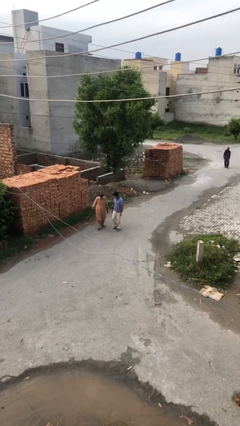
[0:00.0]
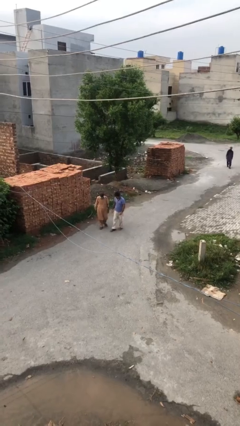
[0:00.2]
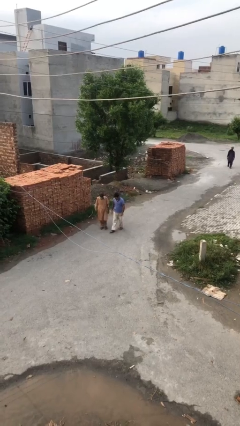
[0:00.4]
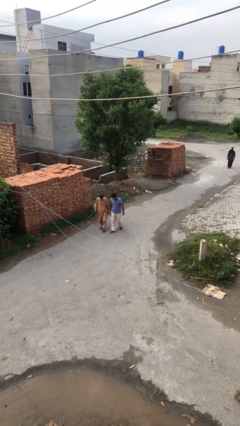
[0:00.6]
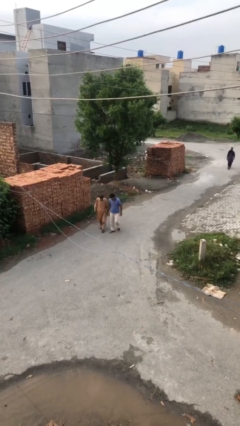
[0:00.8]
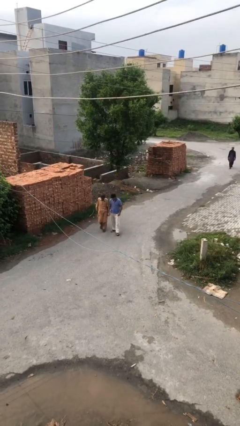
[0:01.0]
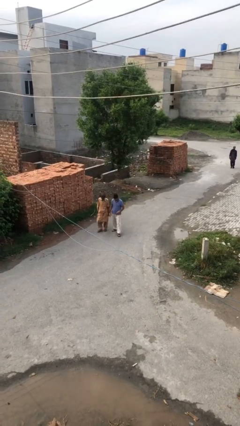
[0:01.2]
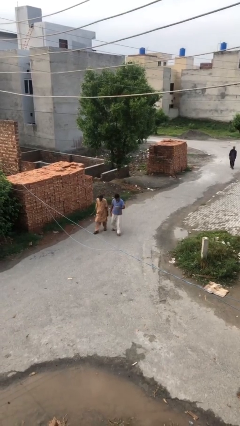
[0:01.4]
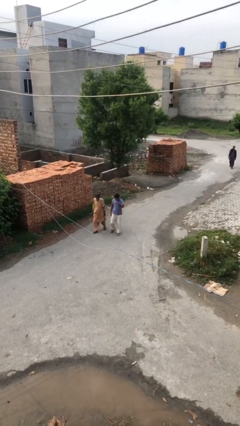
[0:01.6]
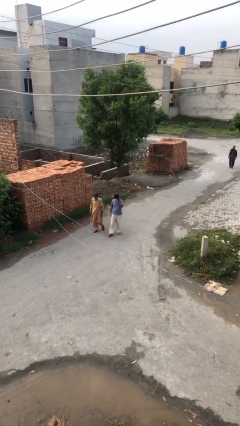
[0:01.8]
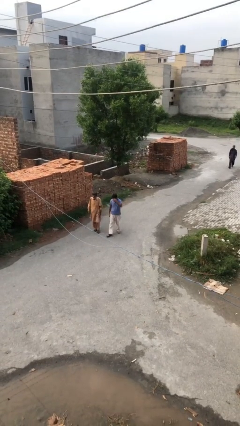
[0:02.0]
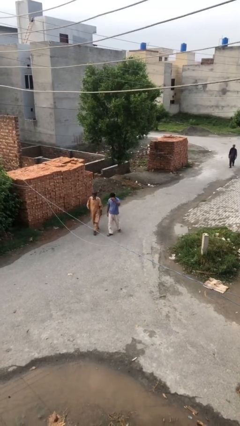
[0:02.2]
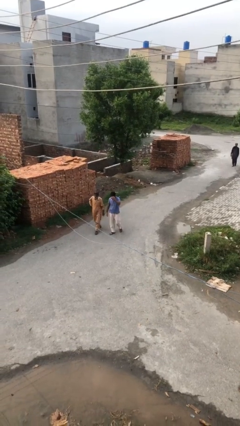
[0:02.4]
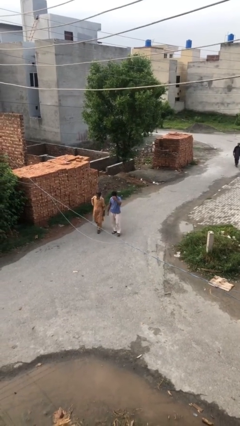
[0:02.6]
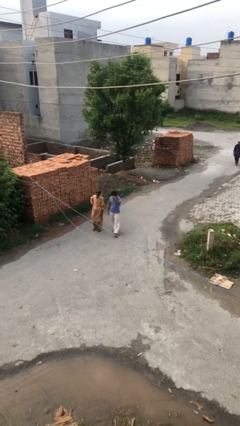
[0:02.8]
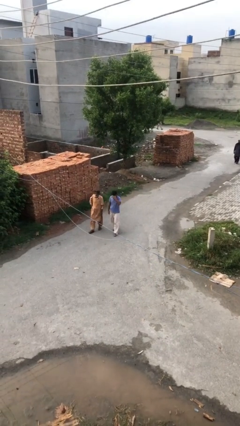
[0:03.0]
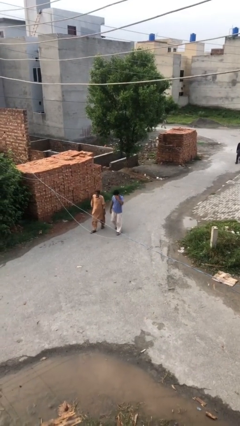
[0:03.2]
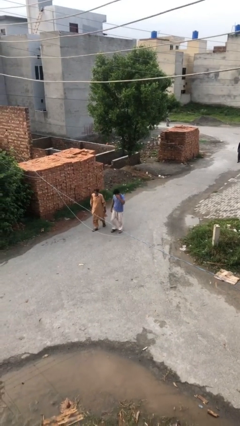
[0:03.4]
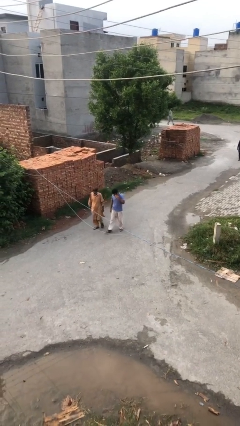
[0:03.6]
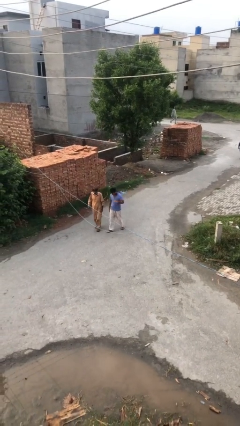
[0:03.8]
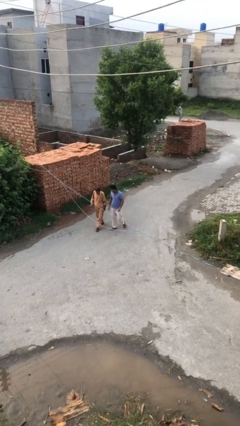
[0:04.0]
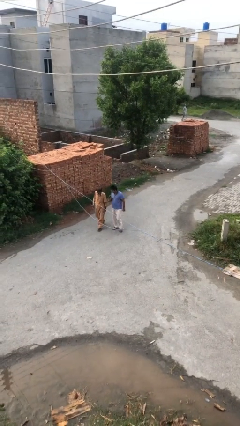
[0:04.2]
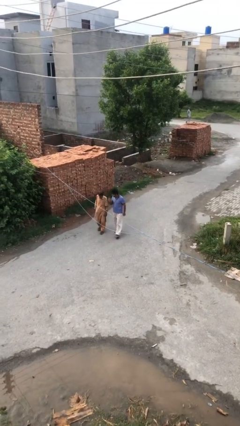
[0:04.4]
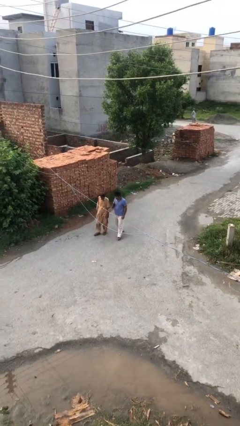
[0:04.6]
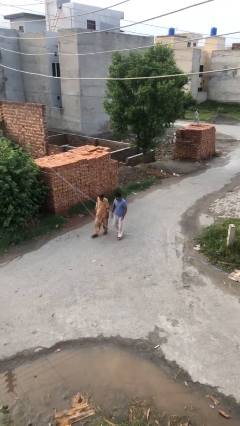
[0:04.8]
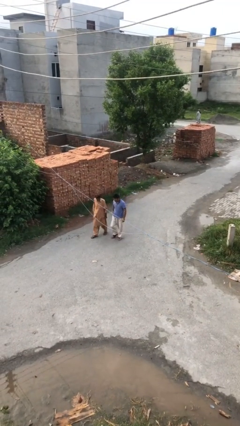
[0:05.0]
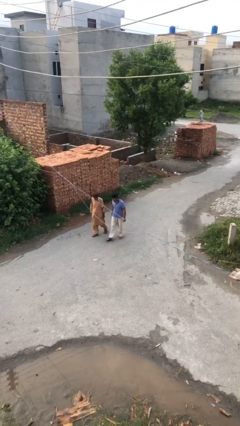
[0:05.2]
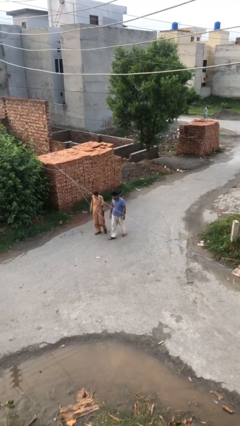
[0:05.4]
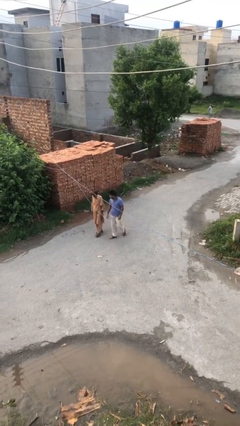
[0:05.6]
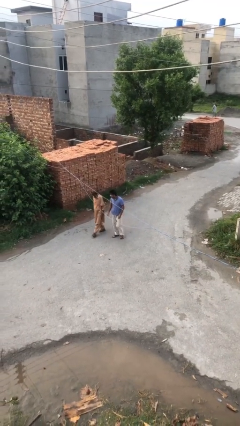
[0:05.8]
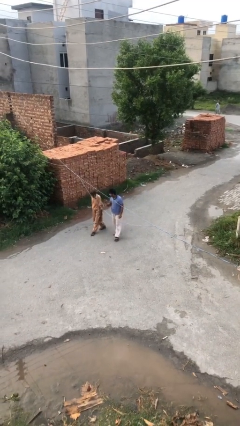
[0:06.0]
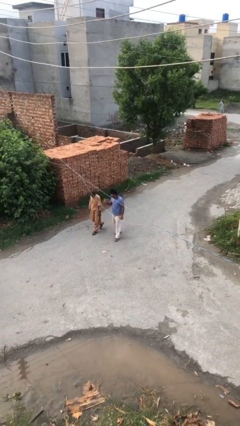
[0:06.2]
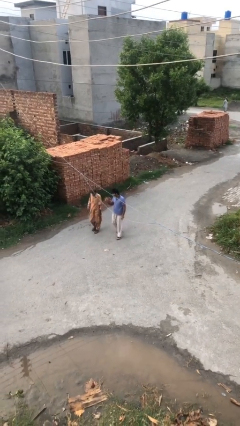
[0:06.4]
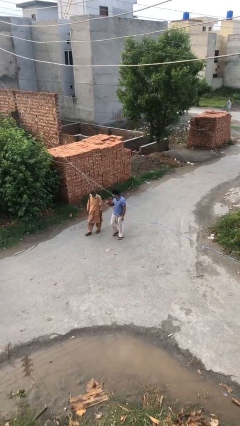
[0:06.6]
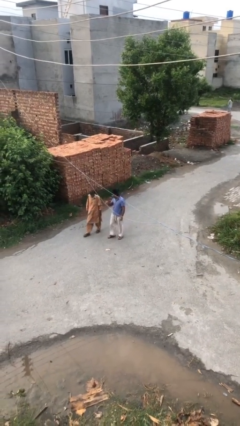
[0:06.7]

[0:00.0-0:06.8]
person talks to person

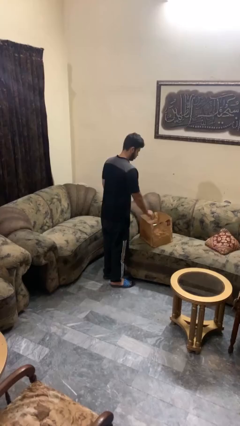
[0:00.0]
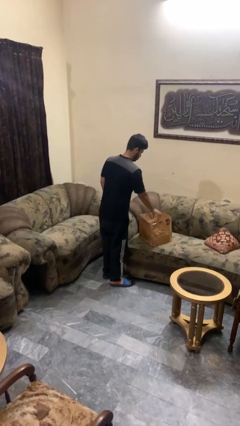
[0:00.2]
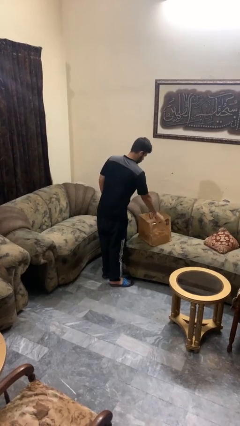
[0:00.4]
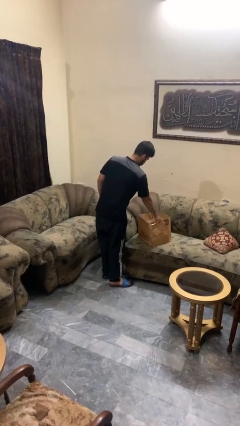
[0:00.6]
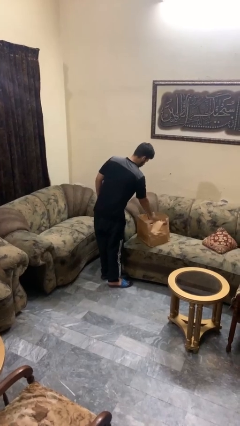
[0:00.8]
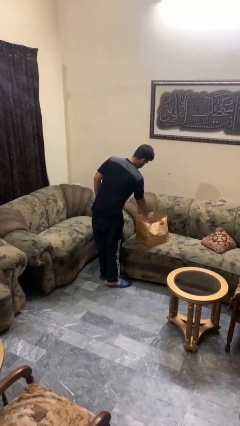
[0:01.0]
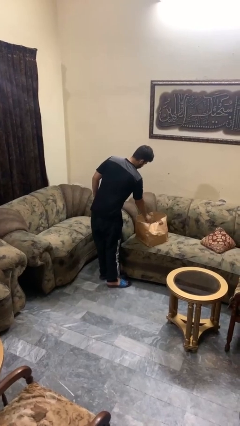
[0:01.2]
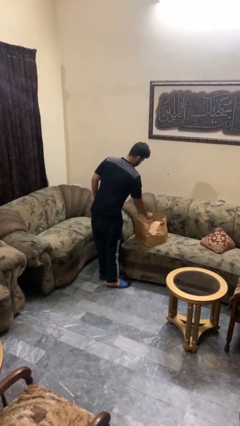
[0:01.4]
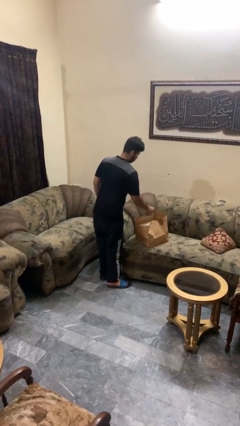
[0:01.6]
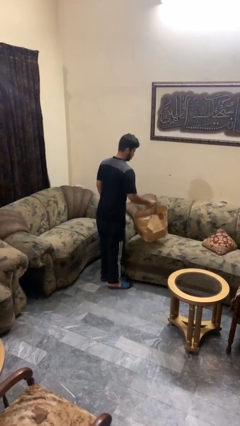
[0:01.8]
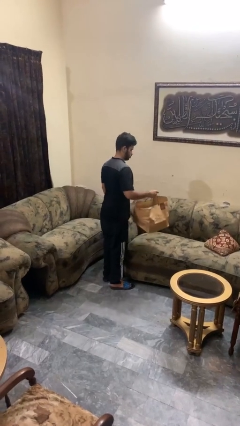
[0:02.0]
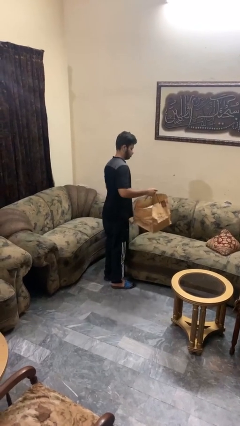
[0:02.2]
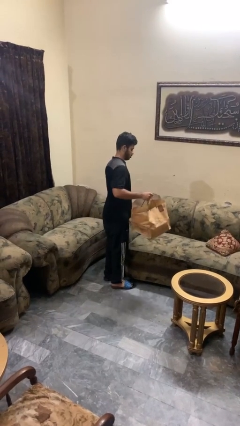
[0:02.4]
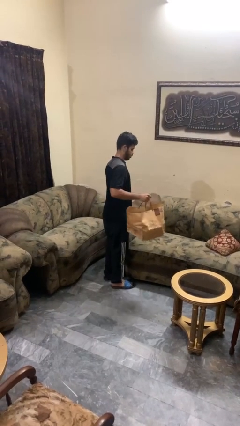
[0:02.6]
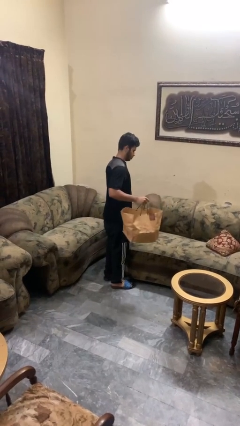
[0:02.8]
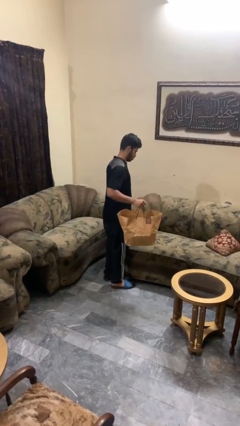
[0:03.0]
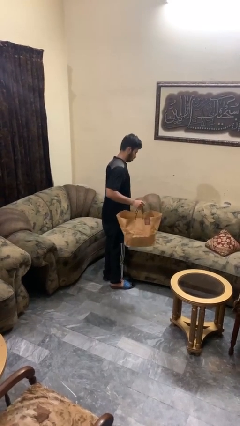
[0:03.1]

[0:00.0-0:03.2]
person picks up object from couch

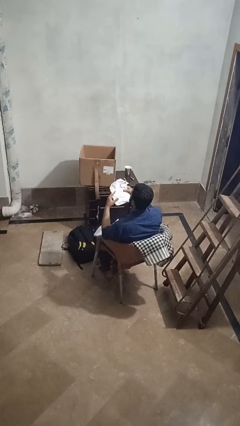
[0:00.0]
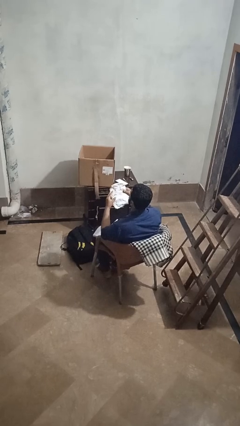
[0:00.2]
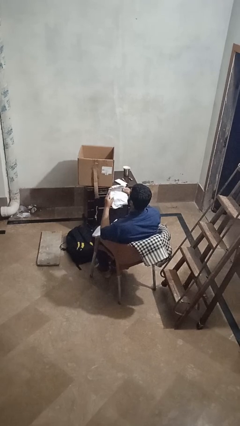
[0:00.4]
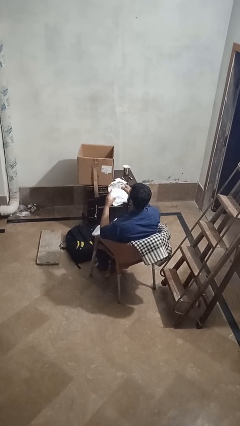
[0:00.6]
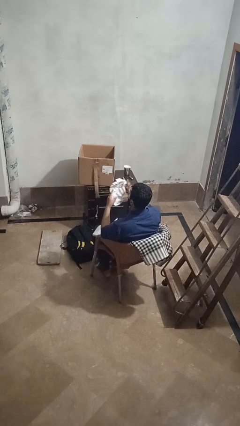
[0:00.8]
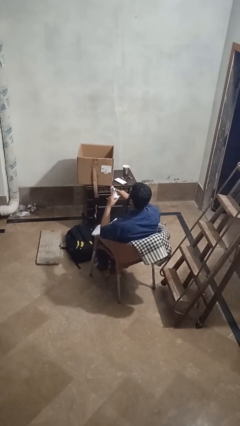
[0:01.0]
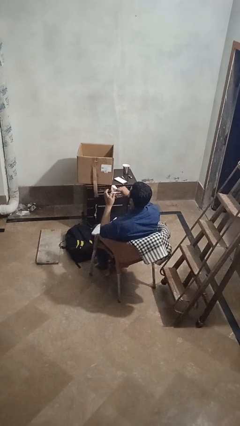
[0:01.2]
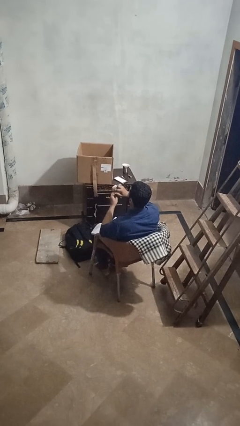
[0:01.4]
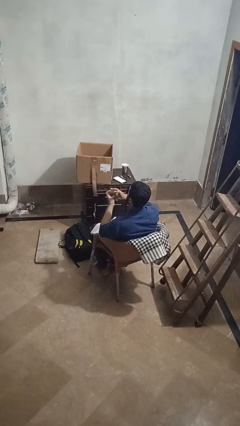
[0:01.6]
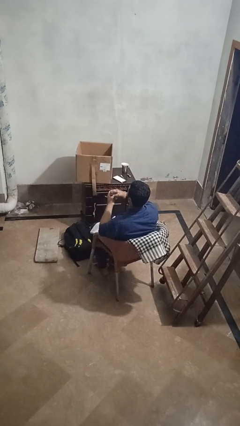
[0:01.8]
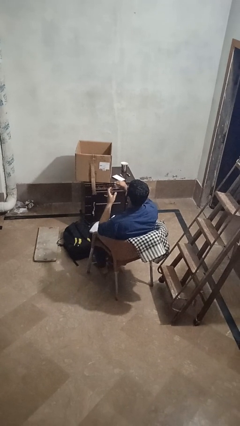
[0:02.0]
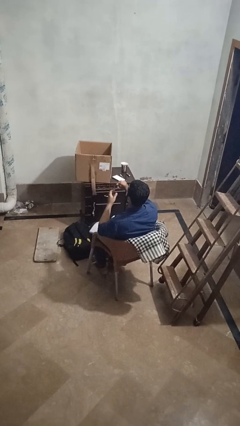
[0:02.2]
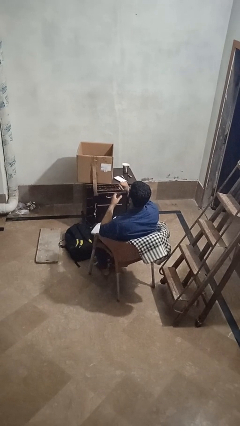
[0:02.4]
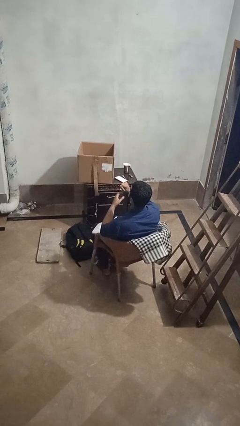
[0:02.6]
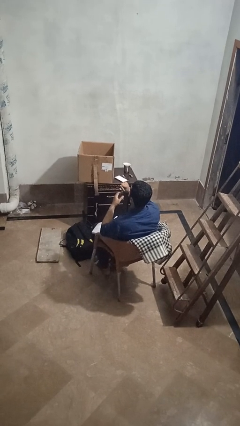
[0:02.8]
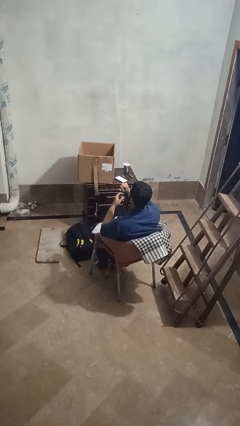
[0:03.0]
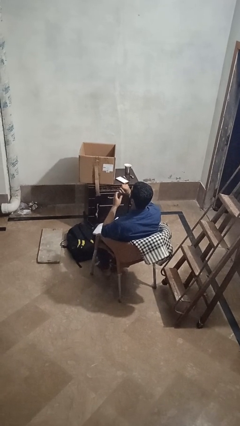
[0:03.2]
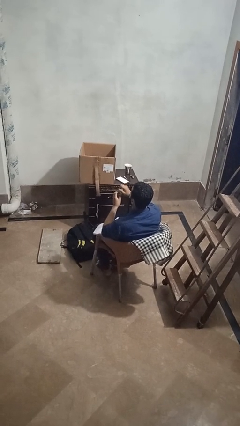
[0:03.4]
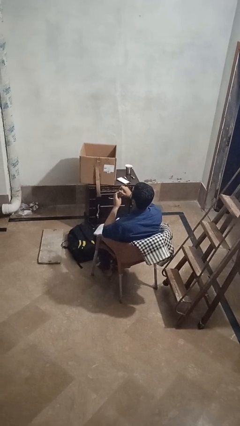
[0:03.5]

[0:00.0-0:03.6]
person crumples paper

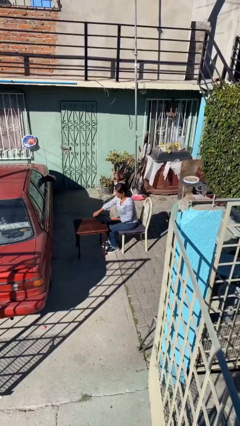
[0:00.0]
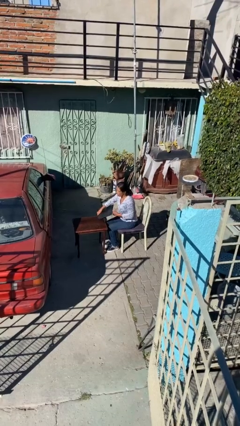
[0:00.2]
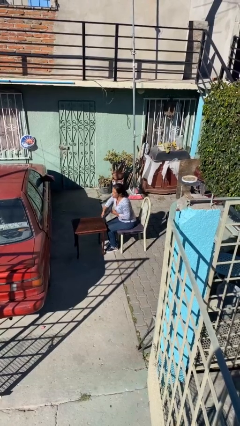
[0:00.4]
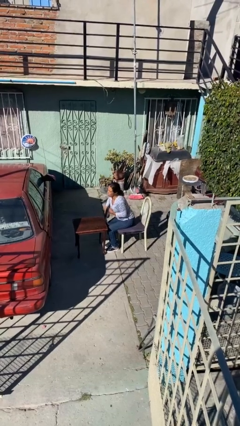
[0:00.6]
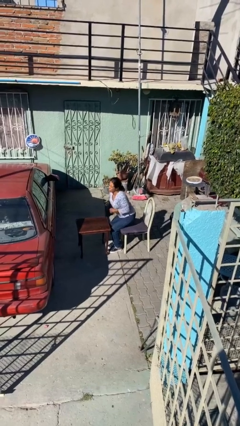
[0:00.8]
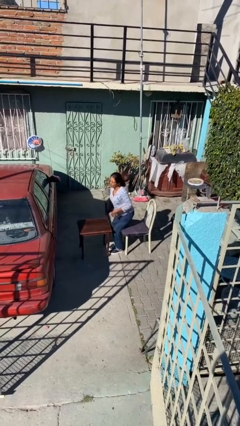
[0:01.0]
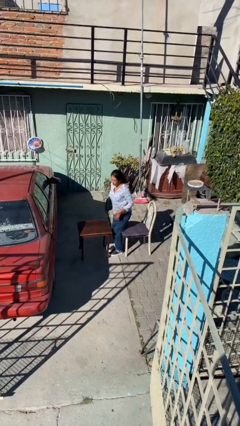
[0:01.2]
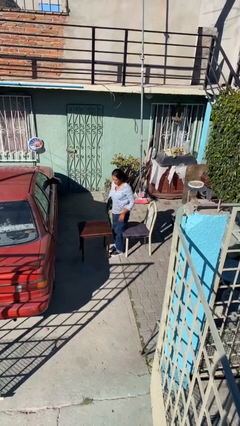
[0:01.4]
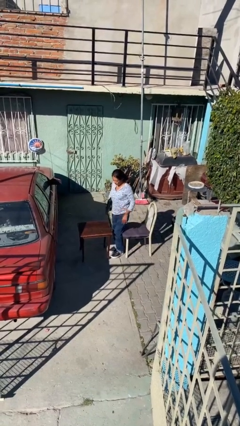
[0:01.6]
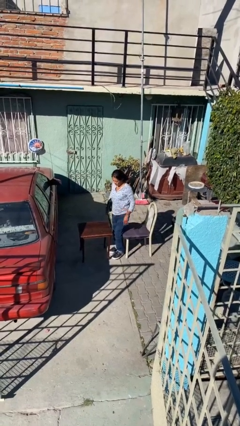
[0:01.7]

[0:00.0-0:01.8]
person stands up

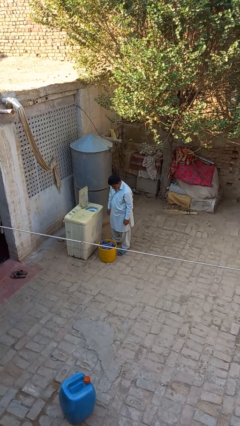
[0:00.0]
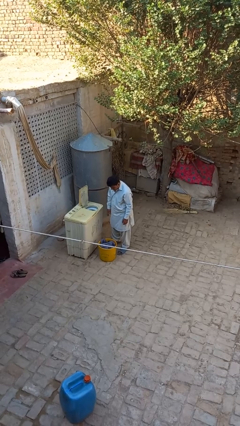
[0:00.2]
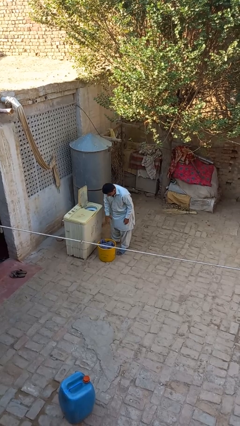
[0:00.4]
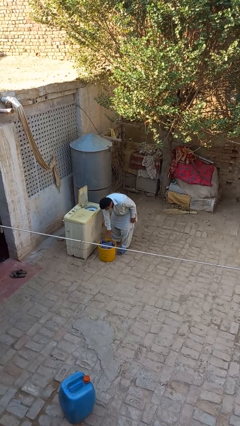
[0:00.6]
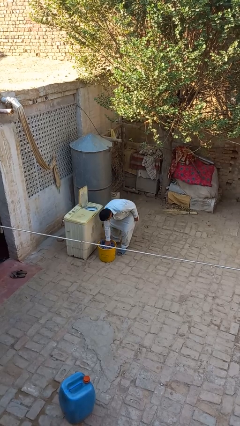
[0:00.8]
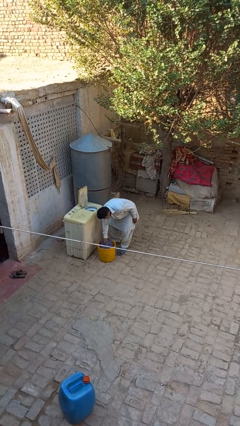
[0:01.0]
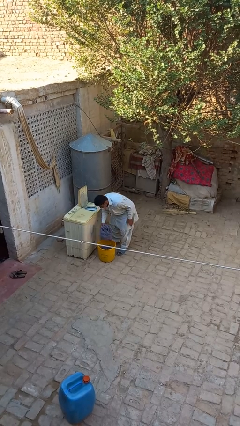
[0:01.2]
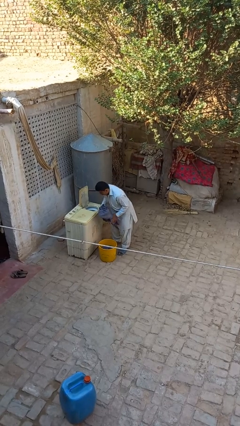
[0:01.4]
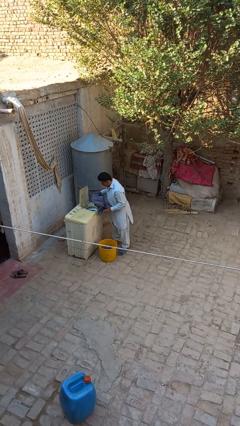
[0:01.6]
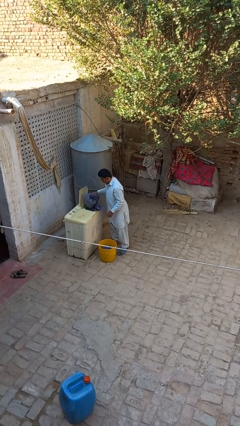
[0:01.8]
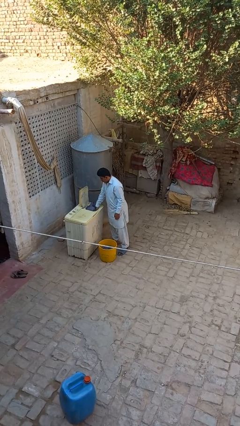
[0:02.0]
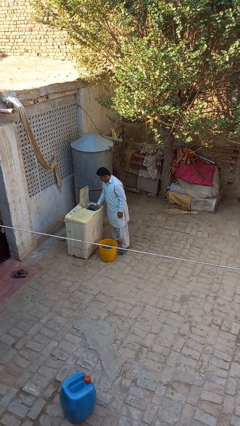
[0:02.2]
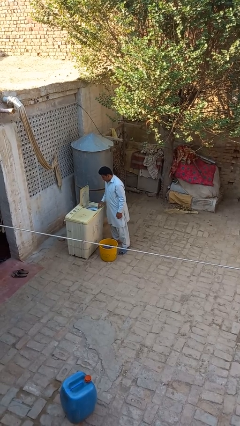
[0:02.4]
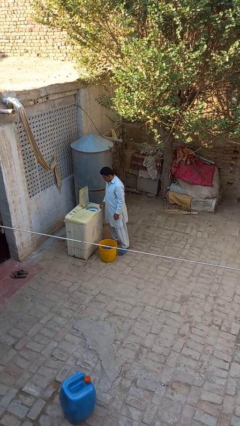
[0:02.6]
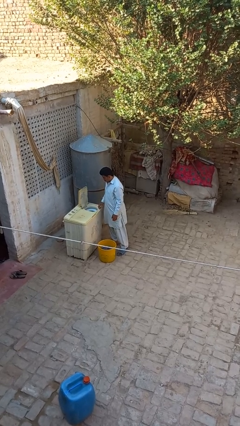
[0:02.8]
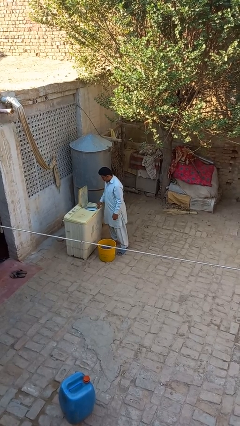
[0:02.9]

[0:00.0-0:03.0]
person loads dryer
